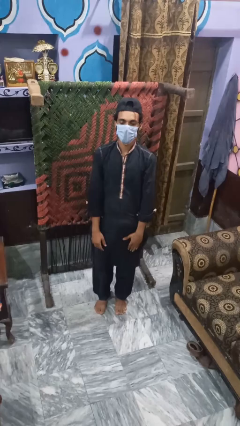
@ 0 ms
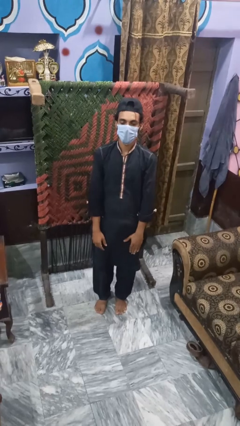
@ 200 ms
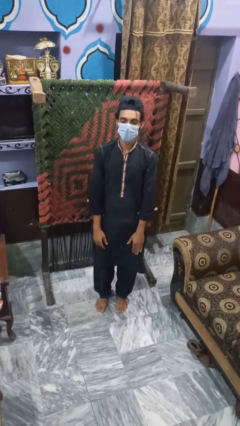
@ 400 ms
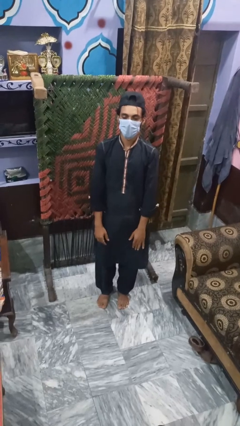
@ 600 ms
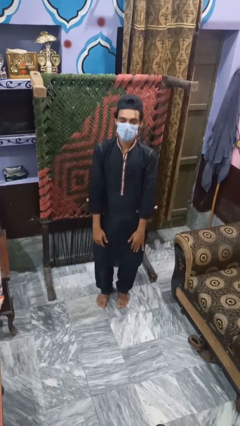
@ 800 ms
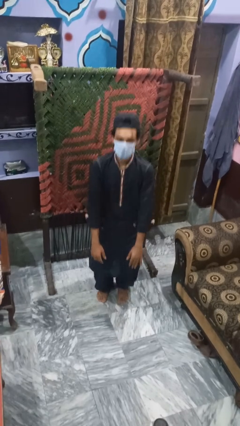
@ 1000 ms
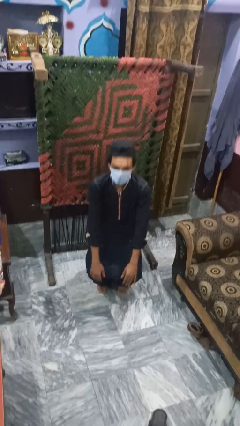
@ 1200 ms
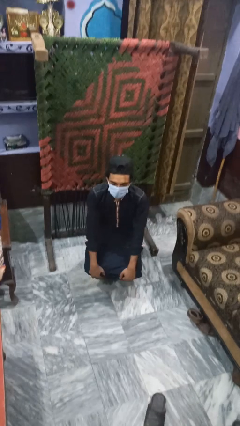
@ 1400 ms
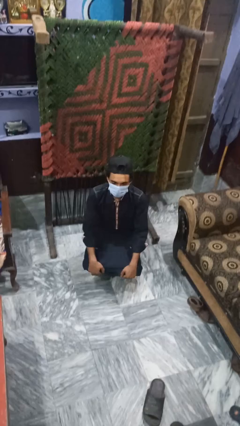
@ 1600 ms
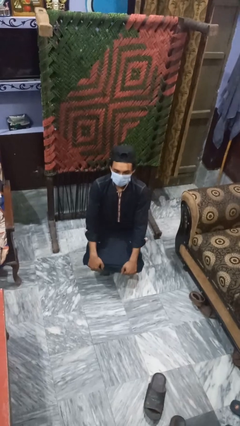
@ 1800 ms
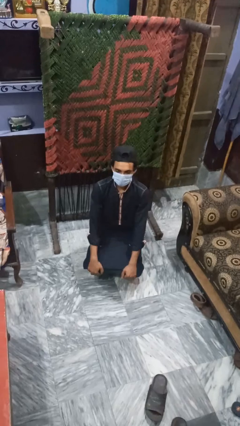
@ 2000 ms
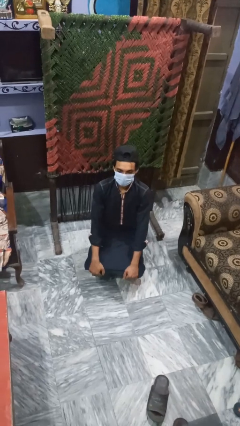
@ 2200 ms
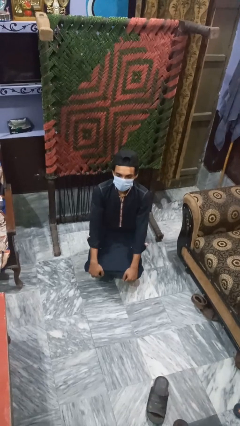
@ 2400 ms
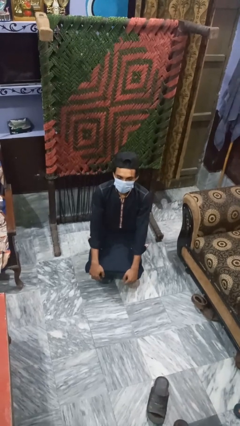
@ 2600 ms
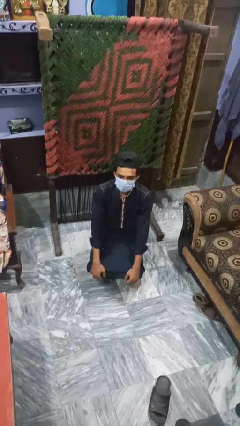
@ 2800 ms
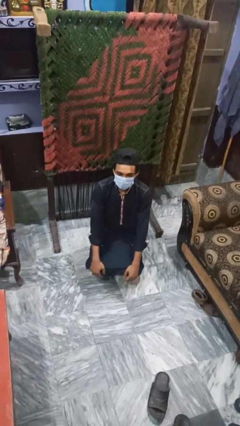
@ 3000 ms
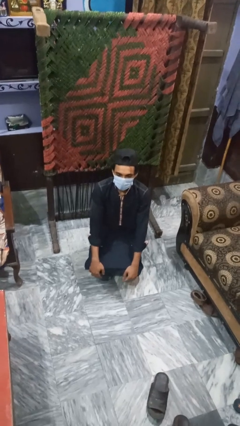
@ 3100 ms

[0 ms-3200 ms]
person squats

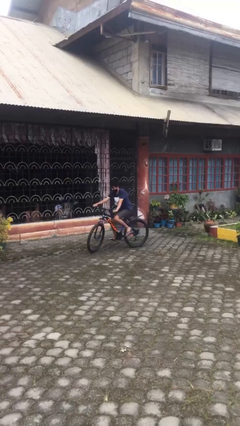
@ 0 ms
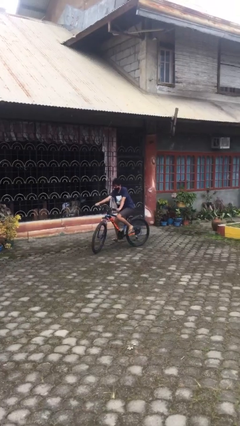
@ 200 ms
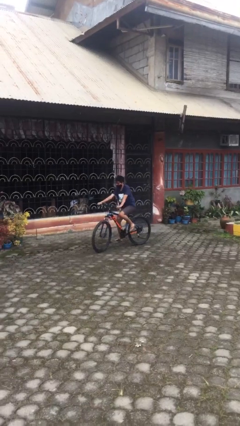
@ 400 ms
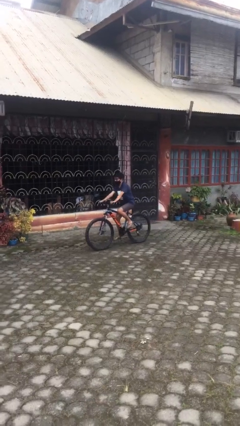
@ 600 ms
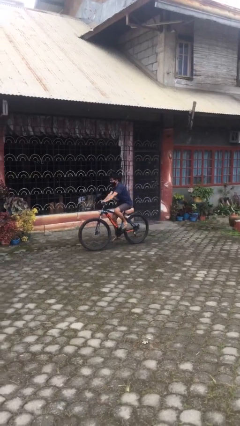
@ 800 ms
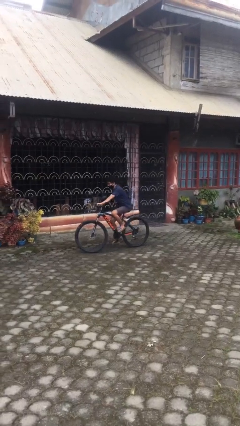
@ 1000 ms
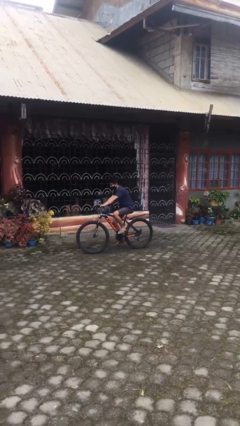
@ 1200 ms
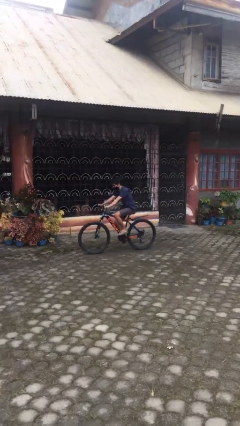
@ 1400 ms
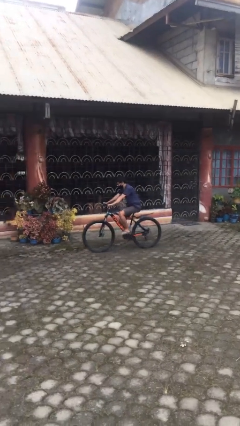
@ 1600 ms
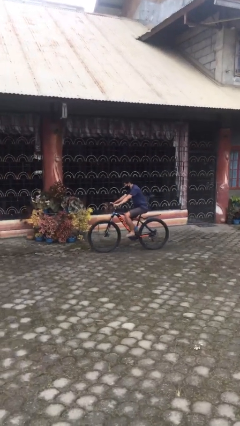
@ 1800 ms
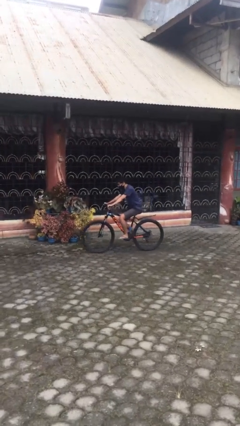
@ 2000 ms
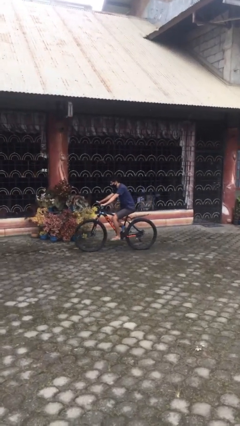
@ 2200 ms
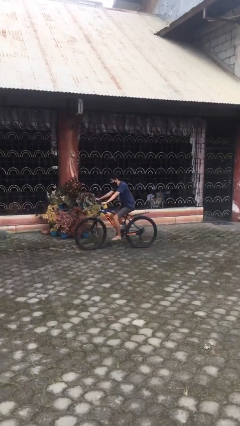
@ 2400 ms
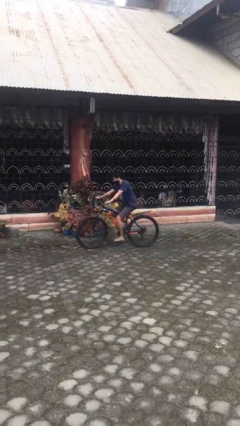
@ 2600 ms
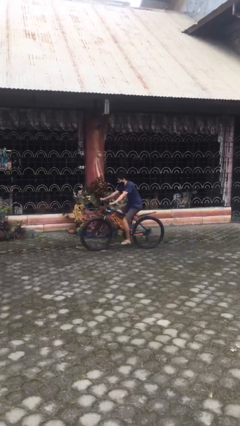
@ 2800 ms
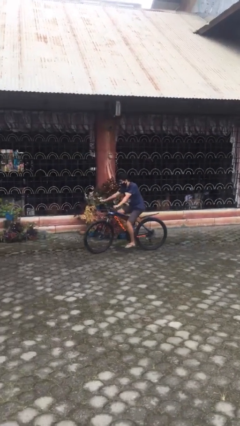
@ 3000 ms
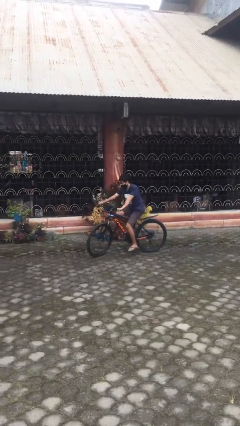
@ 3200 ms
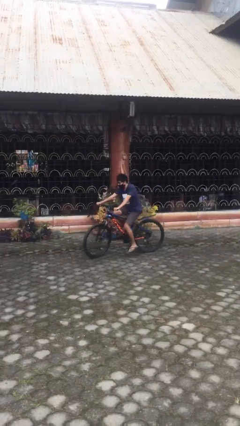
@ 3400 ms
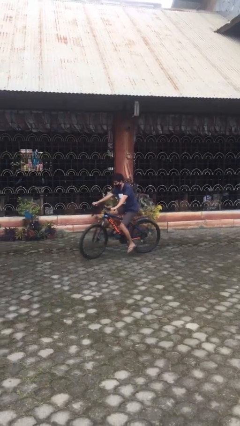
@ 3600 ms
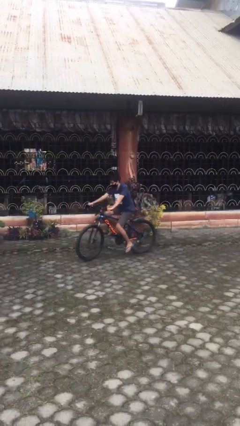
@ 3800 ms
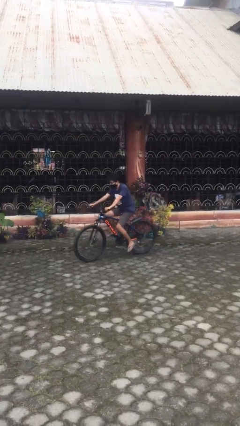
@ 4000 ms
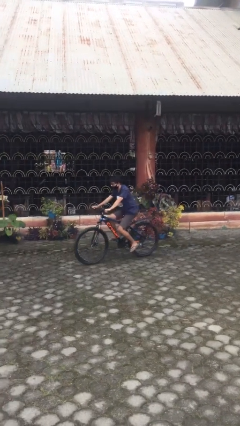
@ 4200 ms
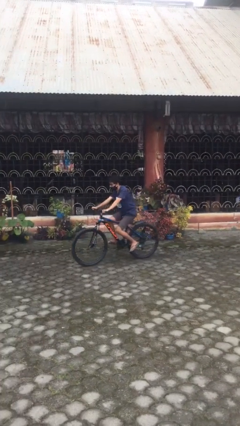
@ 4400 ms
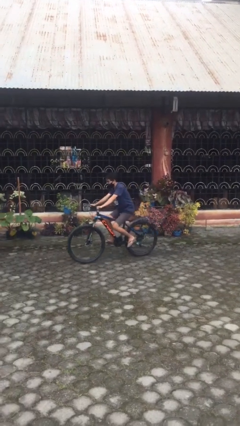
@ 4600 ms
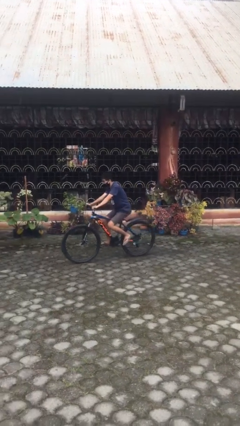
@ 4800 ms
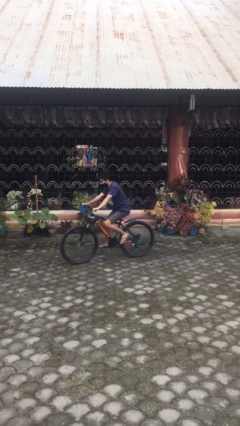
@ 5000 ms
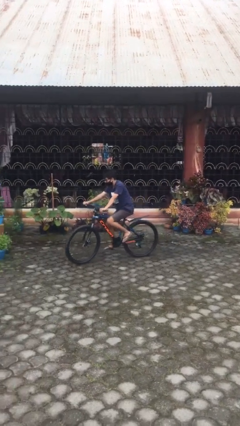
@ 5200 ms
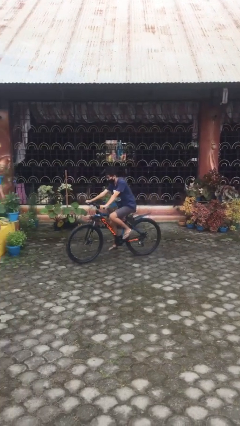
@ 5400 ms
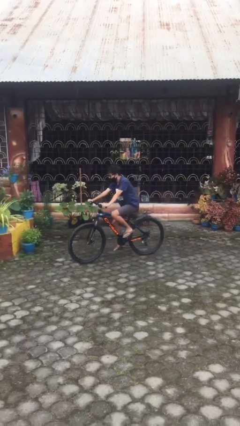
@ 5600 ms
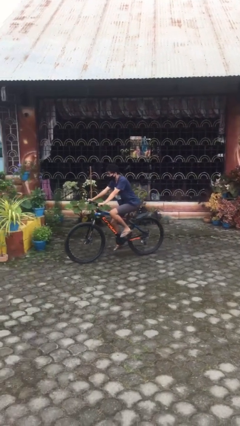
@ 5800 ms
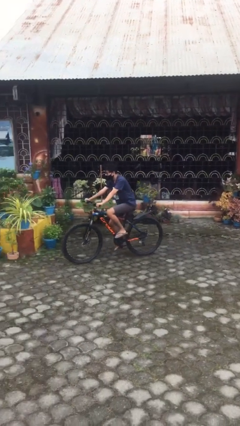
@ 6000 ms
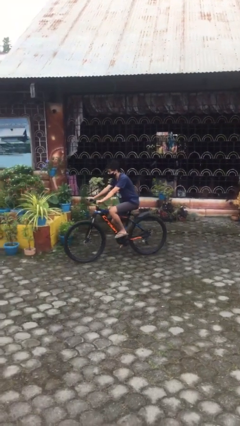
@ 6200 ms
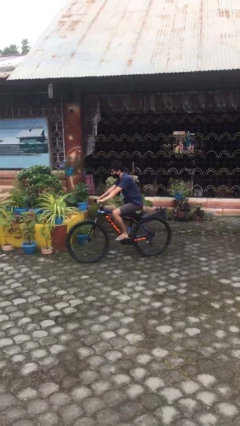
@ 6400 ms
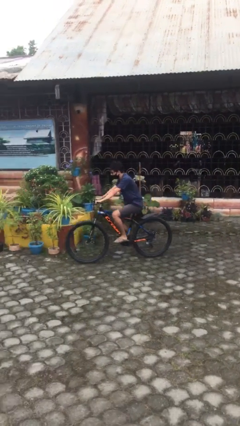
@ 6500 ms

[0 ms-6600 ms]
person rides bicycle

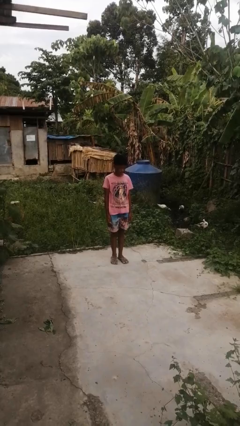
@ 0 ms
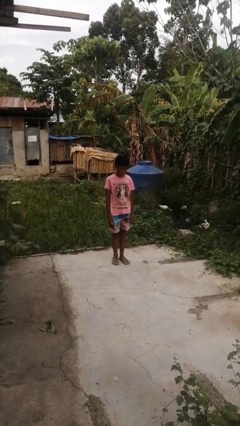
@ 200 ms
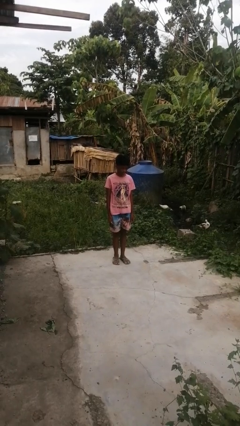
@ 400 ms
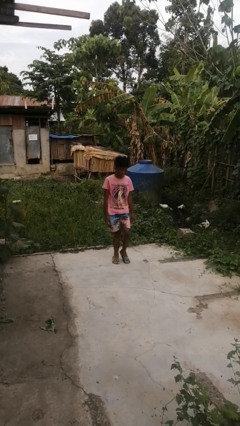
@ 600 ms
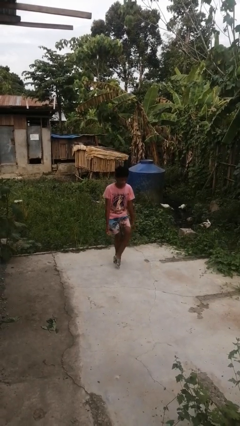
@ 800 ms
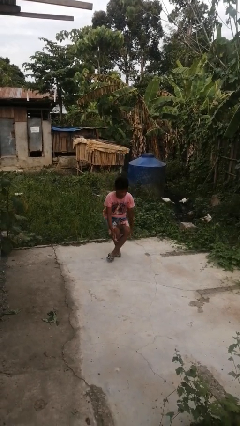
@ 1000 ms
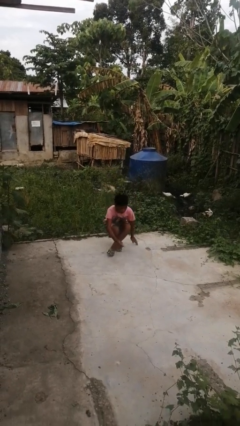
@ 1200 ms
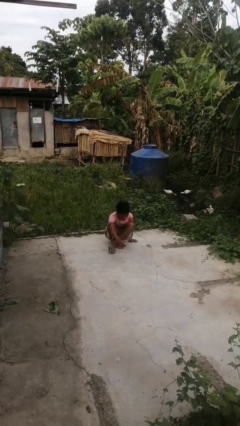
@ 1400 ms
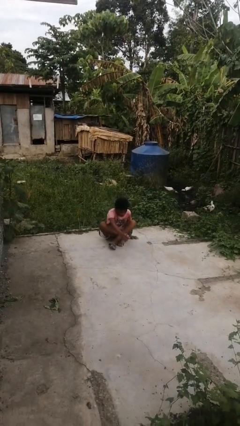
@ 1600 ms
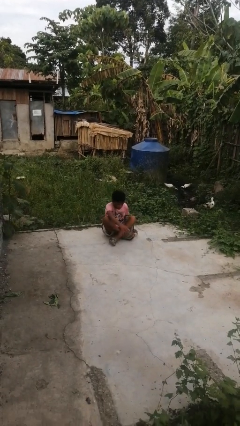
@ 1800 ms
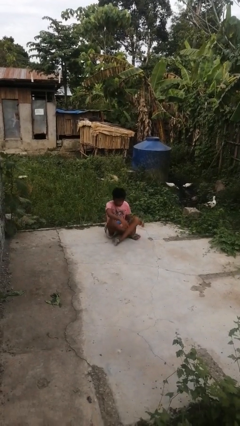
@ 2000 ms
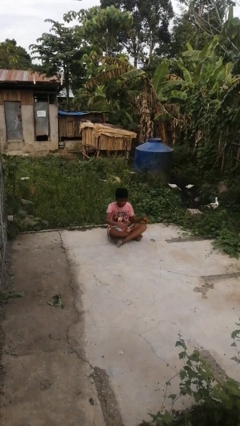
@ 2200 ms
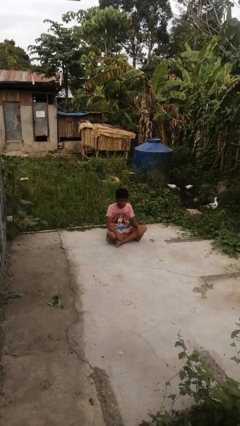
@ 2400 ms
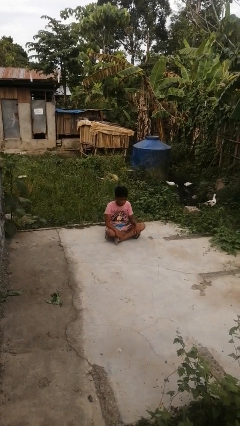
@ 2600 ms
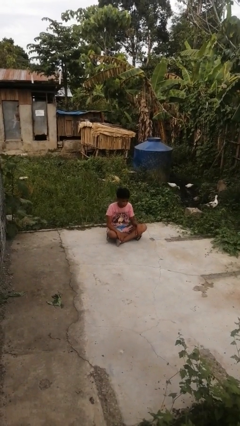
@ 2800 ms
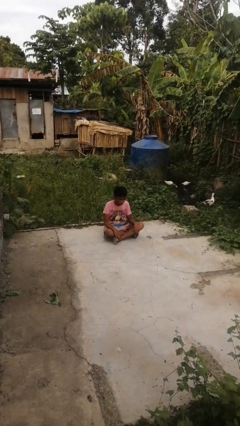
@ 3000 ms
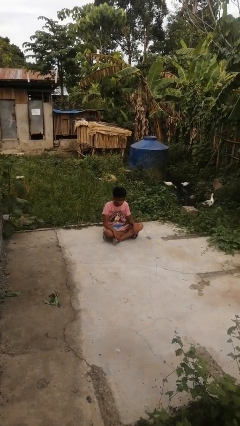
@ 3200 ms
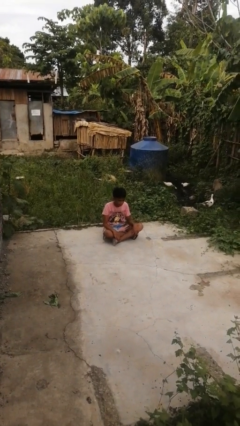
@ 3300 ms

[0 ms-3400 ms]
person sits crisscross

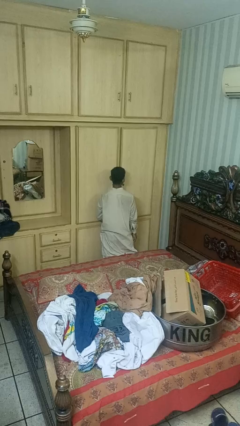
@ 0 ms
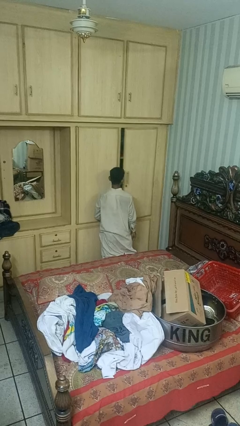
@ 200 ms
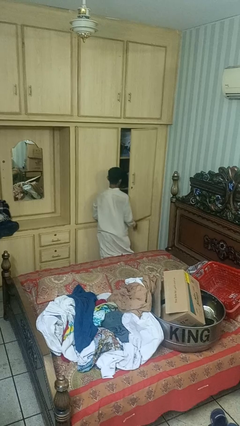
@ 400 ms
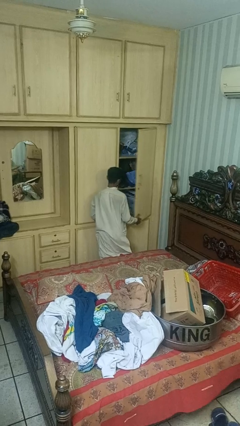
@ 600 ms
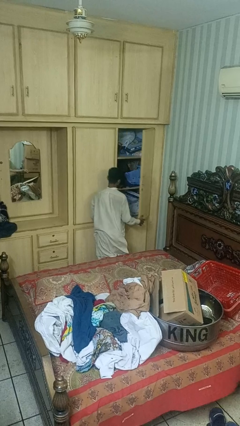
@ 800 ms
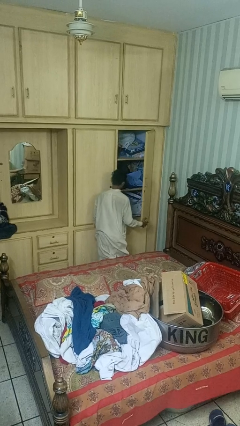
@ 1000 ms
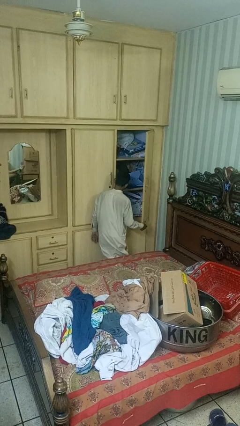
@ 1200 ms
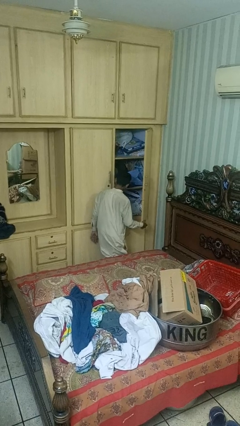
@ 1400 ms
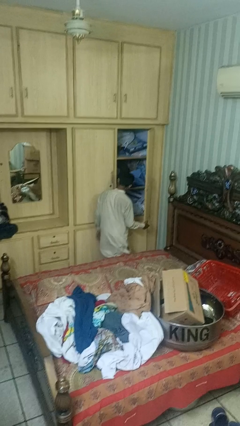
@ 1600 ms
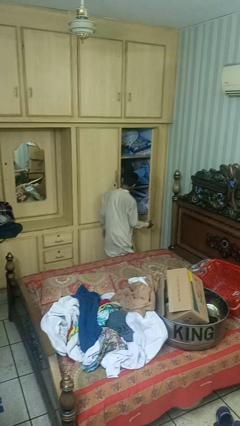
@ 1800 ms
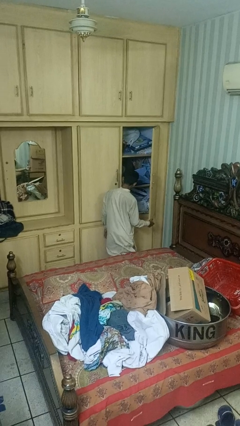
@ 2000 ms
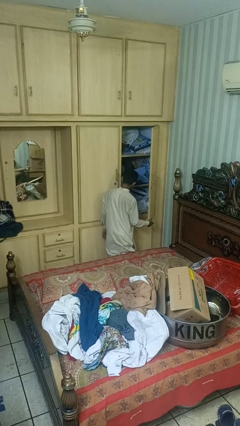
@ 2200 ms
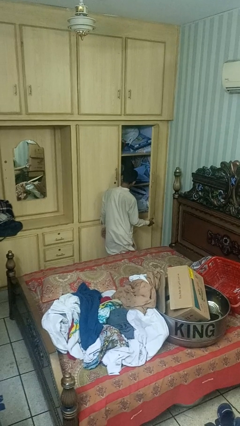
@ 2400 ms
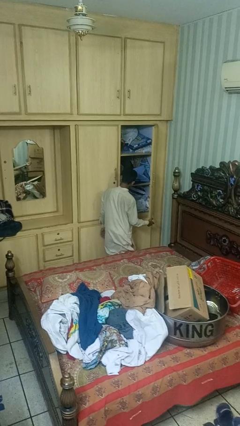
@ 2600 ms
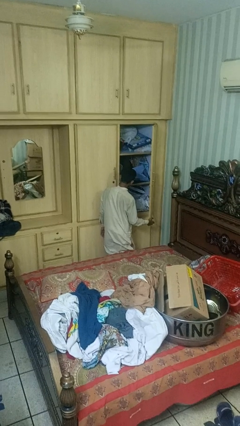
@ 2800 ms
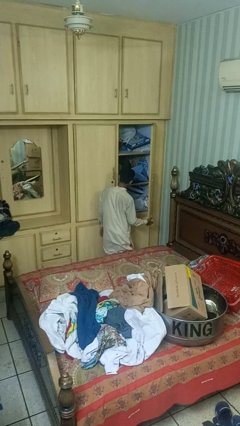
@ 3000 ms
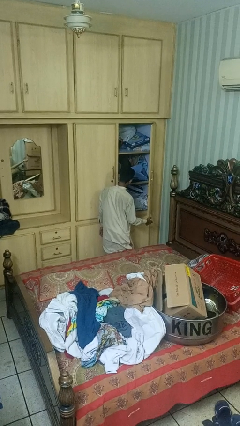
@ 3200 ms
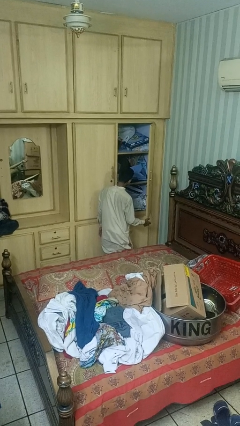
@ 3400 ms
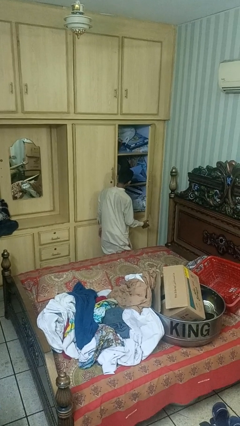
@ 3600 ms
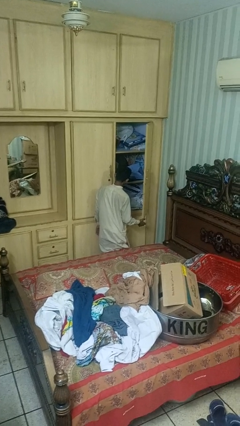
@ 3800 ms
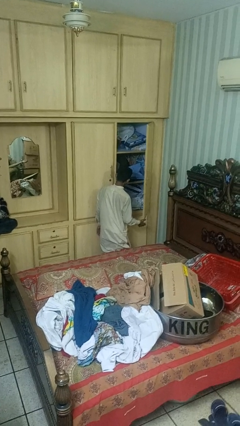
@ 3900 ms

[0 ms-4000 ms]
person opens closet door

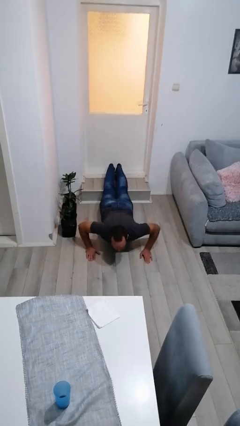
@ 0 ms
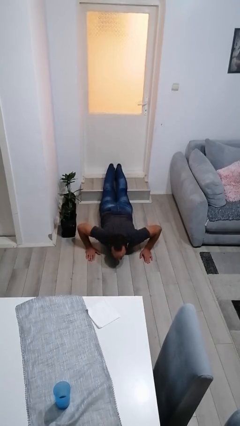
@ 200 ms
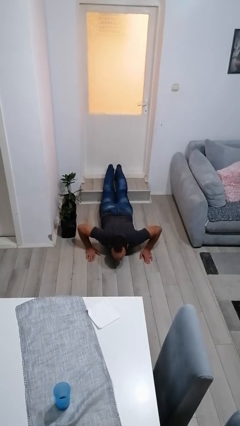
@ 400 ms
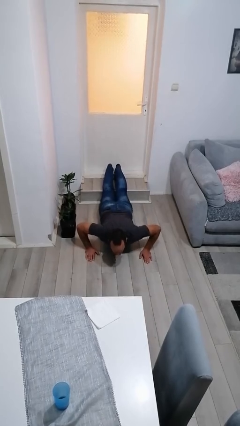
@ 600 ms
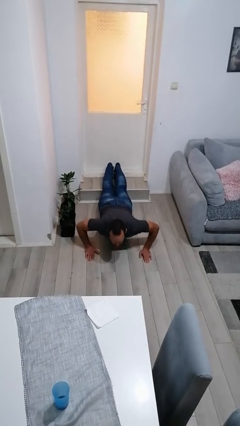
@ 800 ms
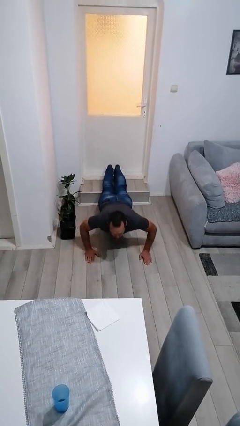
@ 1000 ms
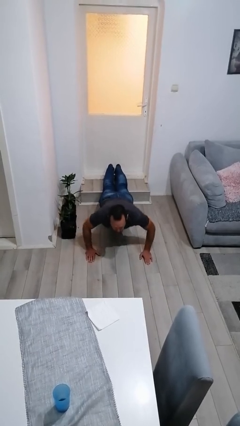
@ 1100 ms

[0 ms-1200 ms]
person exercises with pushup
